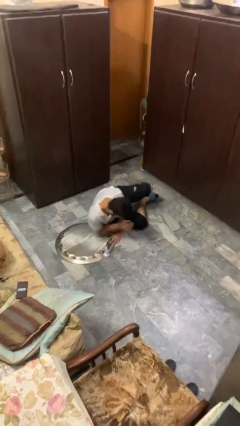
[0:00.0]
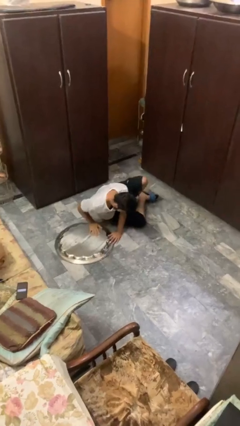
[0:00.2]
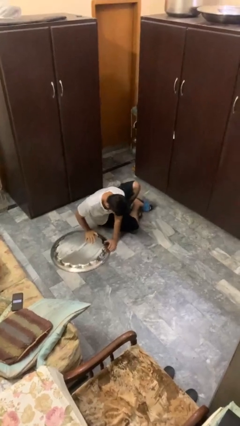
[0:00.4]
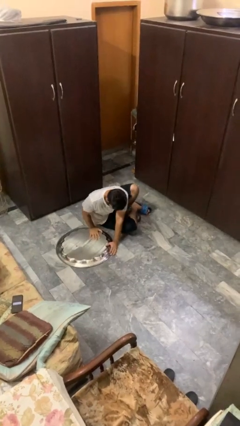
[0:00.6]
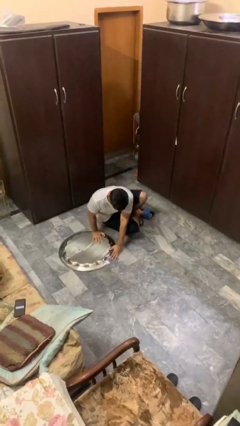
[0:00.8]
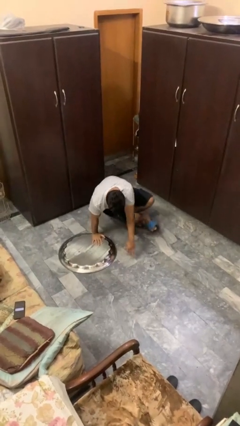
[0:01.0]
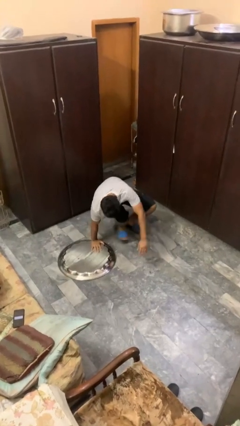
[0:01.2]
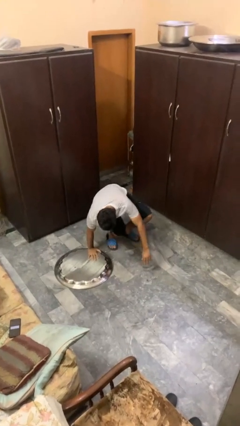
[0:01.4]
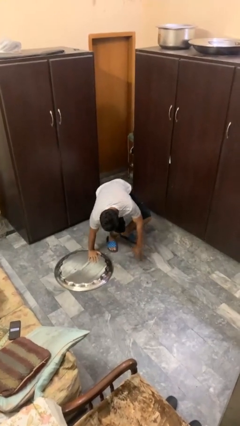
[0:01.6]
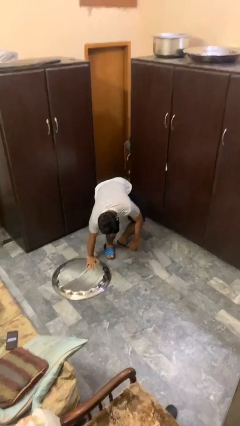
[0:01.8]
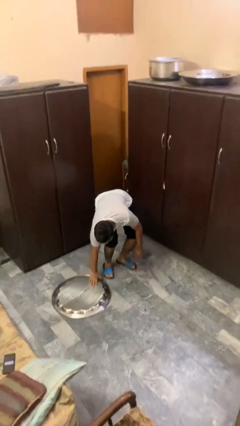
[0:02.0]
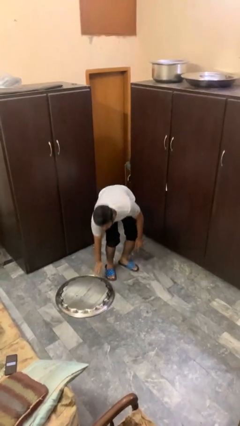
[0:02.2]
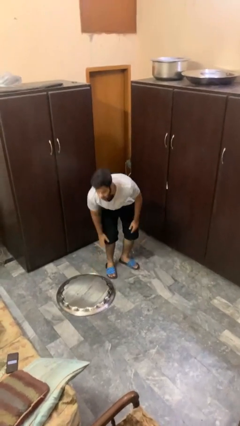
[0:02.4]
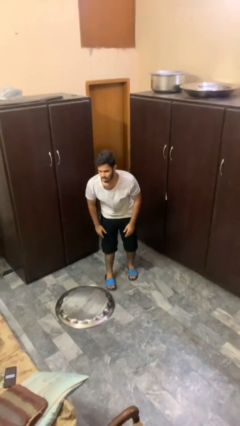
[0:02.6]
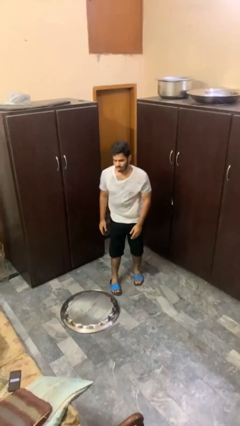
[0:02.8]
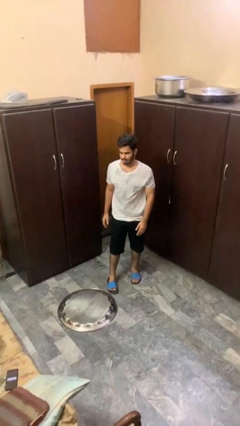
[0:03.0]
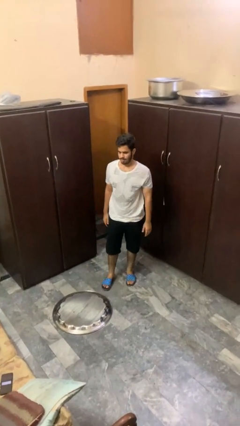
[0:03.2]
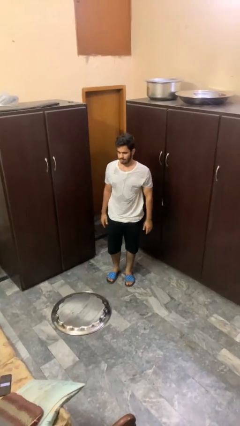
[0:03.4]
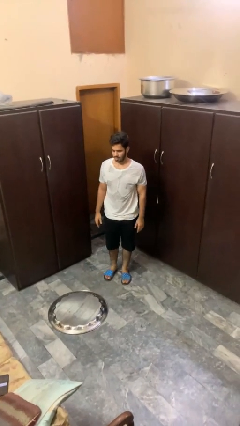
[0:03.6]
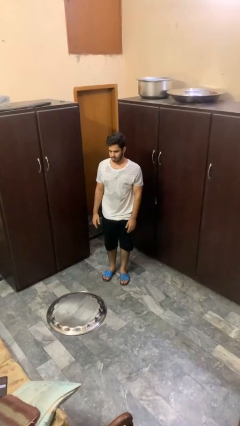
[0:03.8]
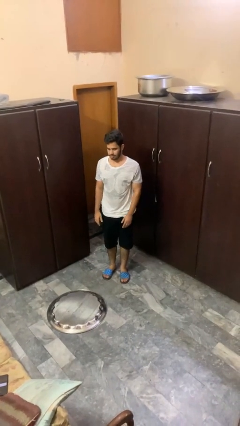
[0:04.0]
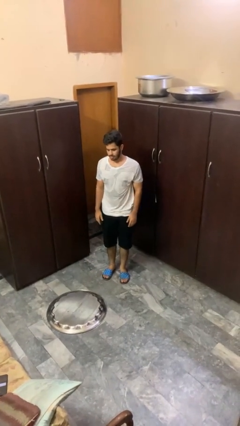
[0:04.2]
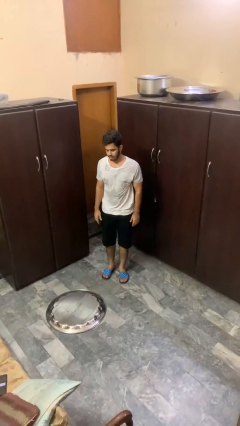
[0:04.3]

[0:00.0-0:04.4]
person stands up from floor

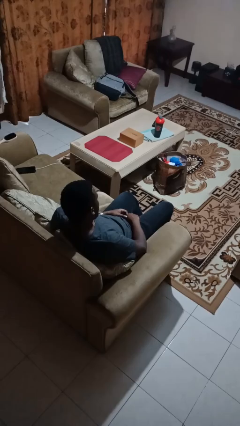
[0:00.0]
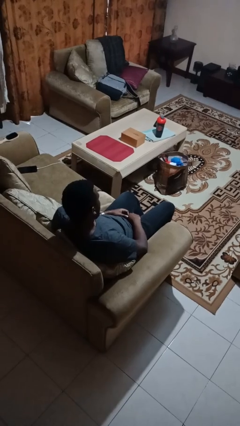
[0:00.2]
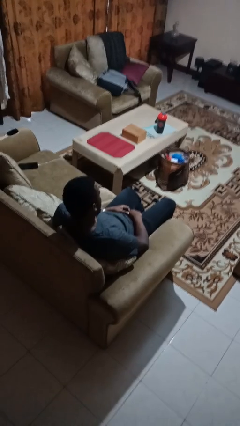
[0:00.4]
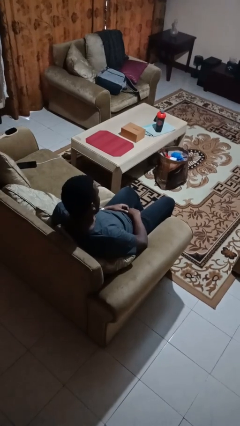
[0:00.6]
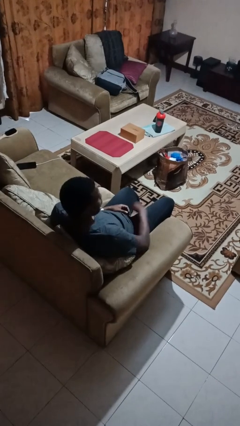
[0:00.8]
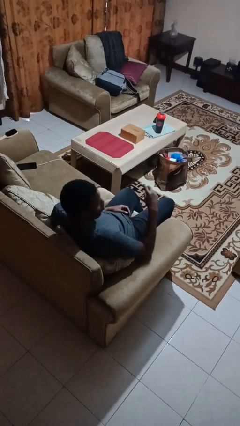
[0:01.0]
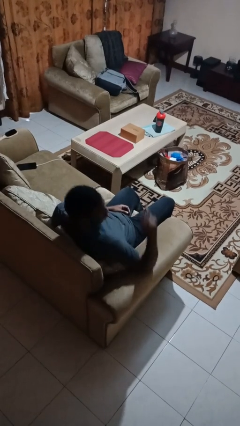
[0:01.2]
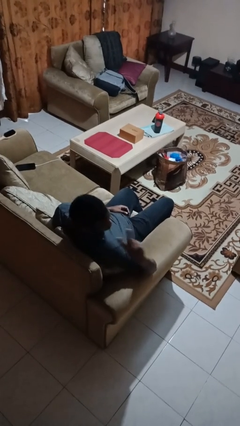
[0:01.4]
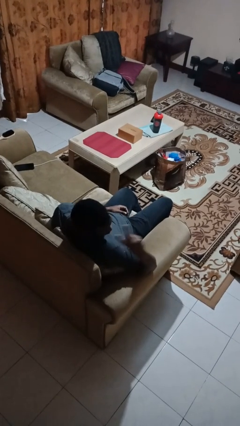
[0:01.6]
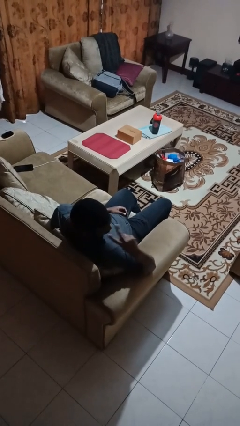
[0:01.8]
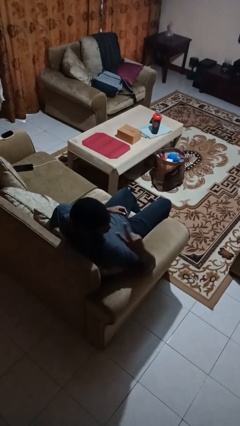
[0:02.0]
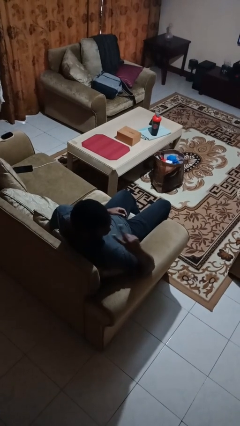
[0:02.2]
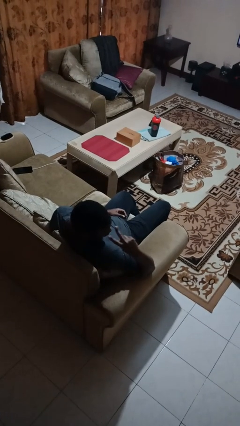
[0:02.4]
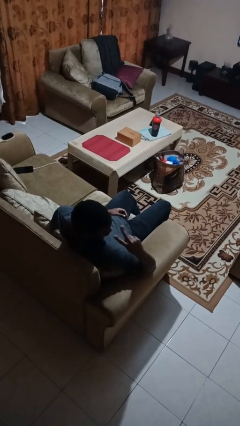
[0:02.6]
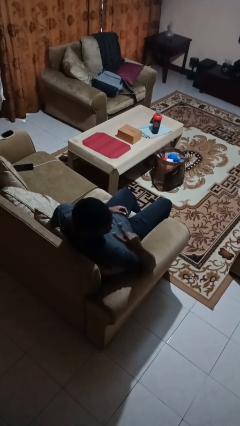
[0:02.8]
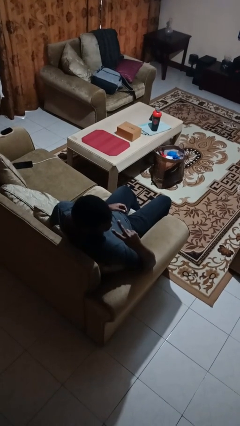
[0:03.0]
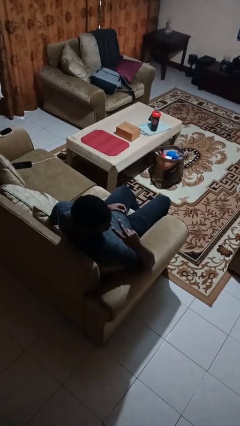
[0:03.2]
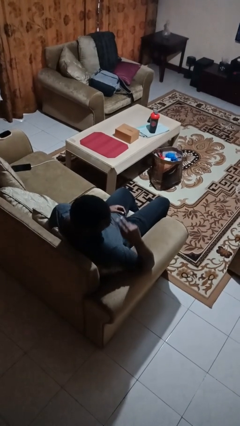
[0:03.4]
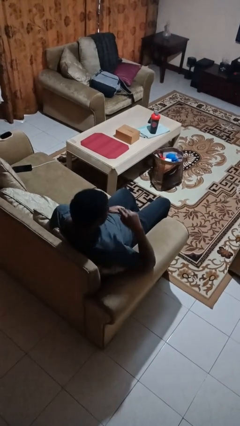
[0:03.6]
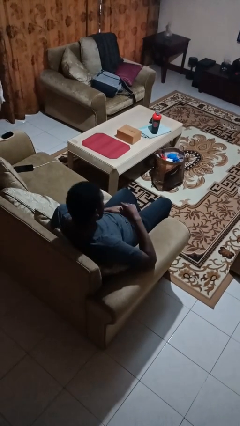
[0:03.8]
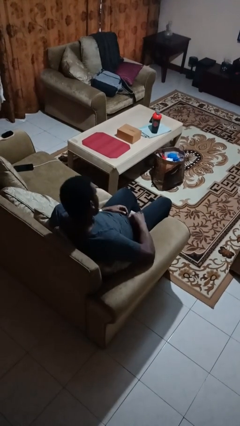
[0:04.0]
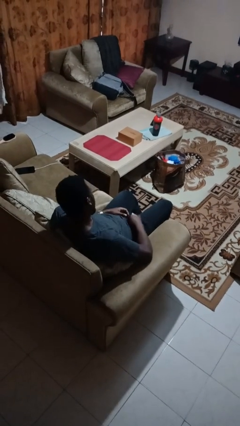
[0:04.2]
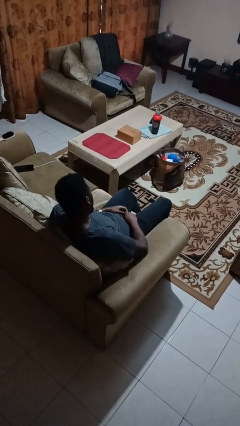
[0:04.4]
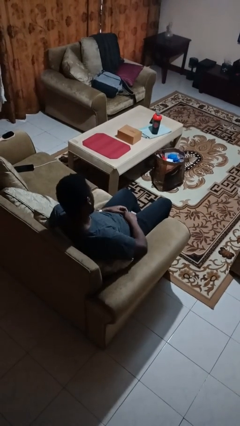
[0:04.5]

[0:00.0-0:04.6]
person gestures watch closely

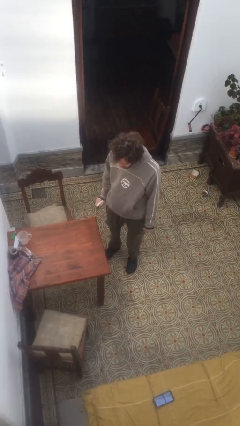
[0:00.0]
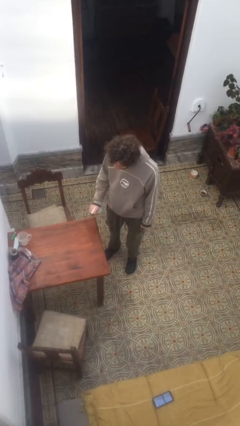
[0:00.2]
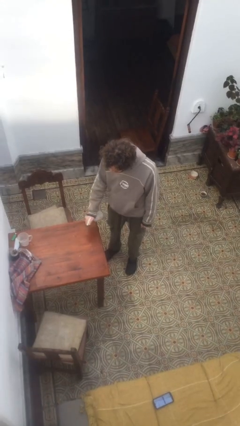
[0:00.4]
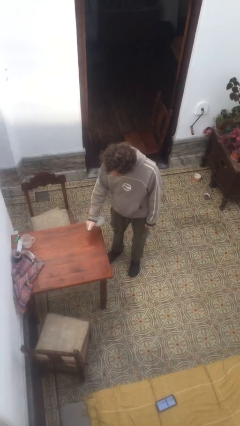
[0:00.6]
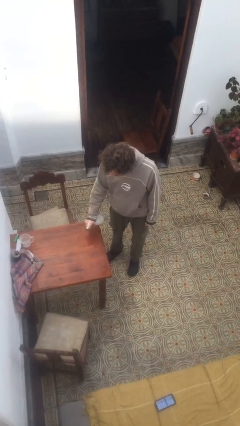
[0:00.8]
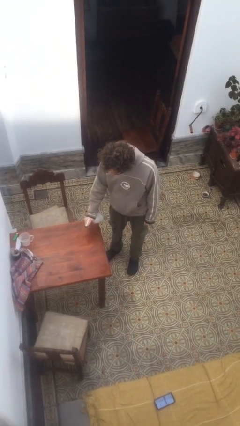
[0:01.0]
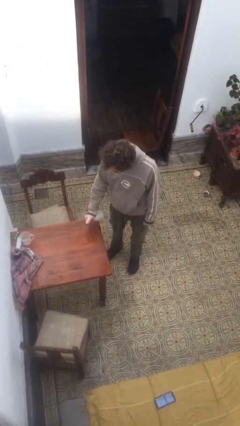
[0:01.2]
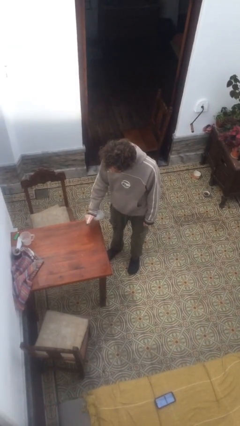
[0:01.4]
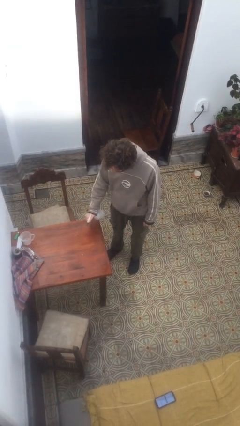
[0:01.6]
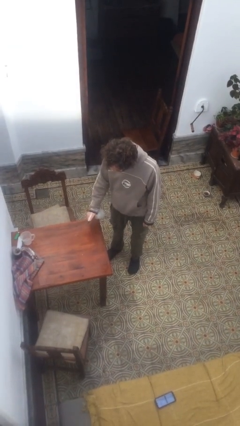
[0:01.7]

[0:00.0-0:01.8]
person sprays from bottle

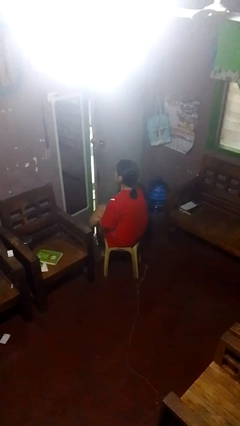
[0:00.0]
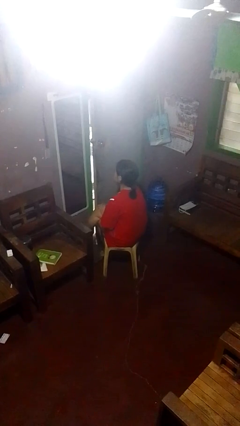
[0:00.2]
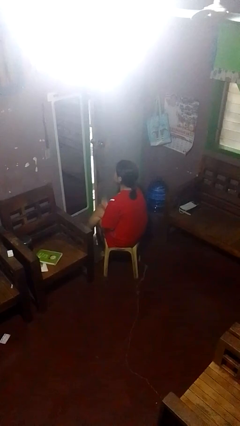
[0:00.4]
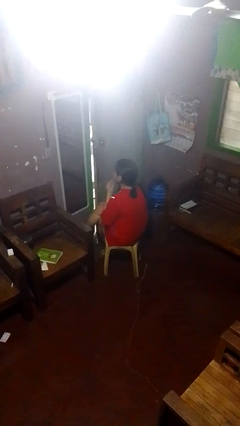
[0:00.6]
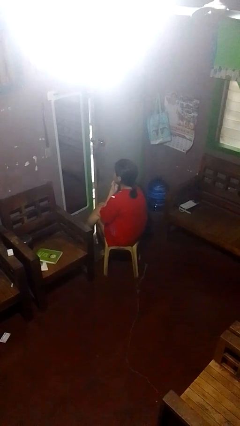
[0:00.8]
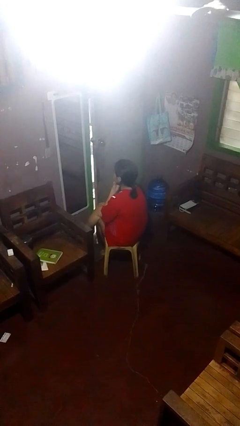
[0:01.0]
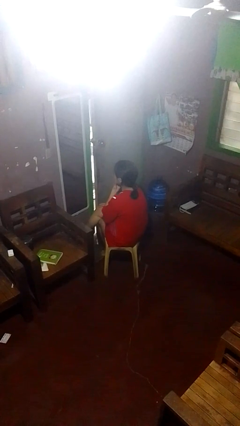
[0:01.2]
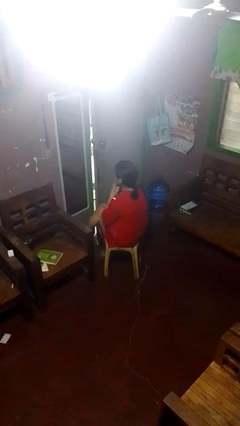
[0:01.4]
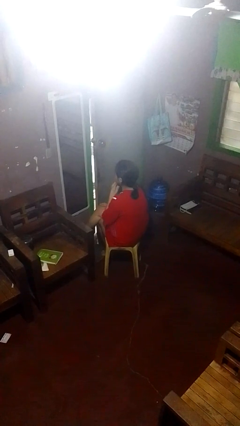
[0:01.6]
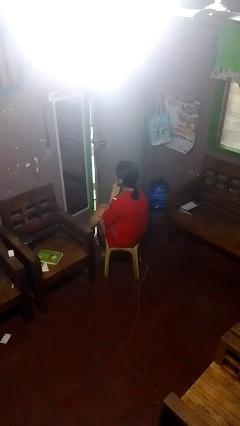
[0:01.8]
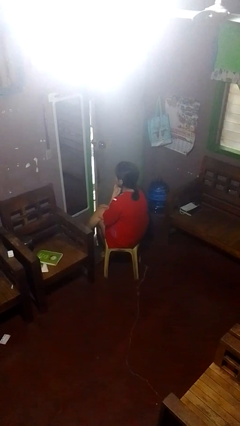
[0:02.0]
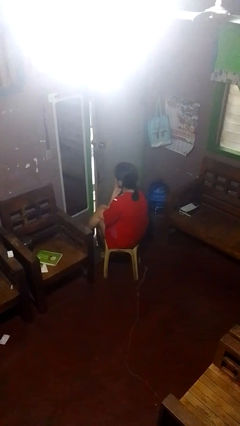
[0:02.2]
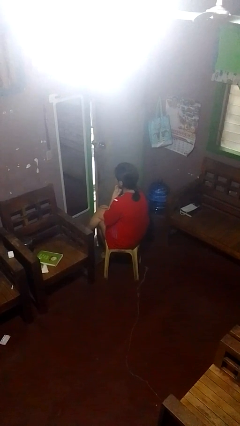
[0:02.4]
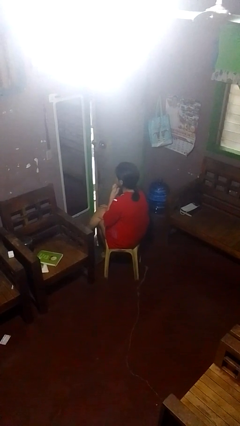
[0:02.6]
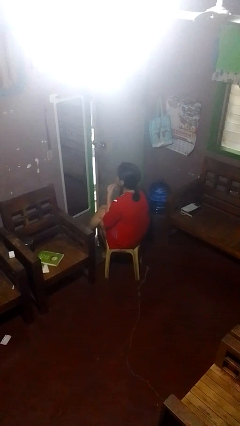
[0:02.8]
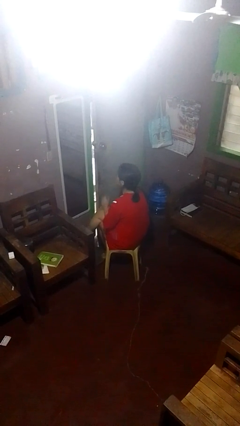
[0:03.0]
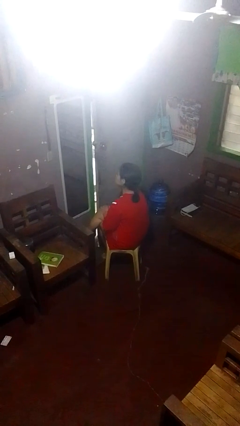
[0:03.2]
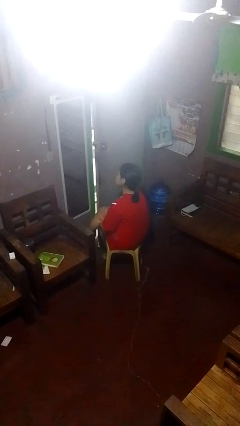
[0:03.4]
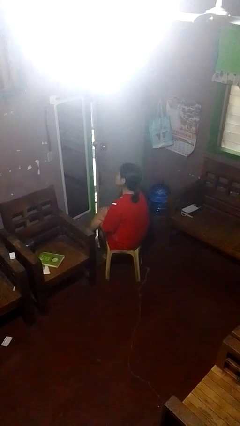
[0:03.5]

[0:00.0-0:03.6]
person strokes chin

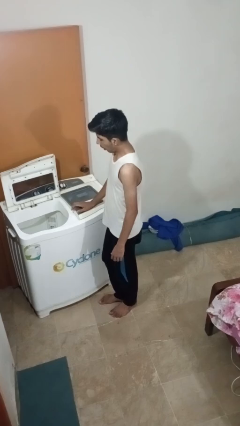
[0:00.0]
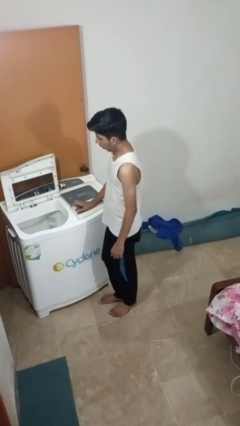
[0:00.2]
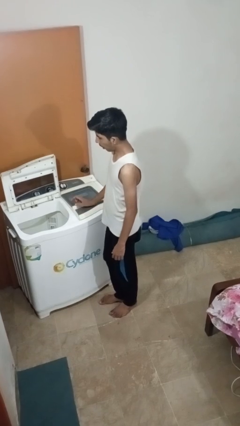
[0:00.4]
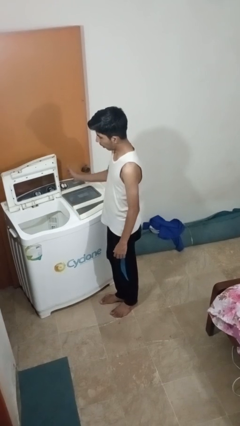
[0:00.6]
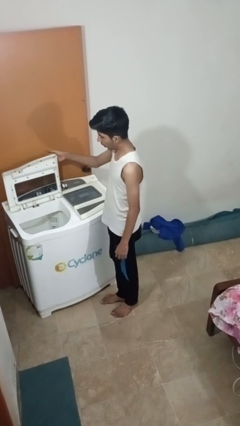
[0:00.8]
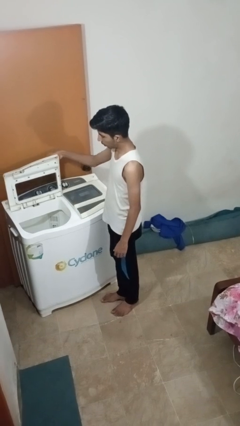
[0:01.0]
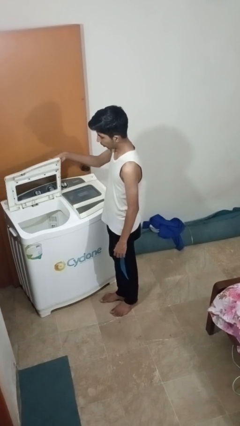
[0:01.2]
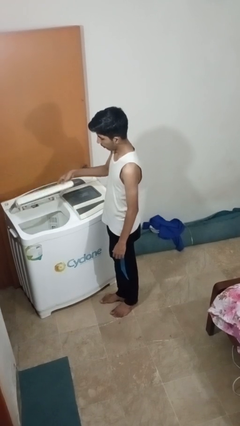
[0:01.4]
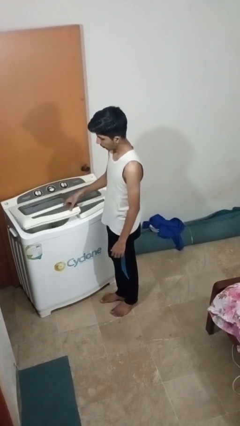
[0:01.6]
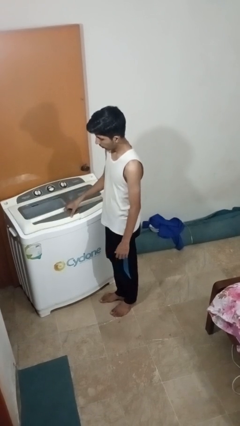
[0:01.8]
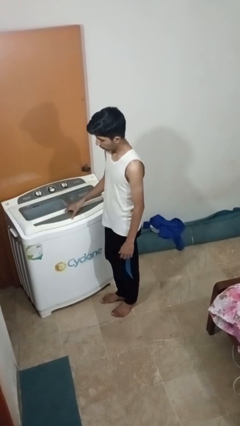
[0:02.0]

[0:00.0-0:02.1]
person closes clothes washer

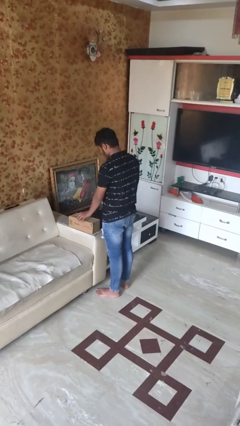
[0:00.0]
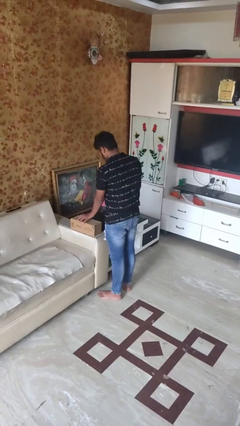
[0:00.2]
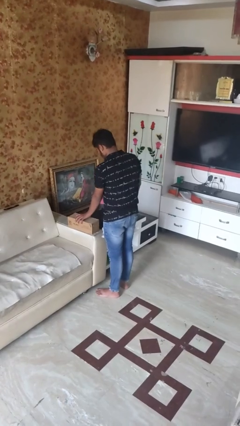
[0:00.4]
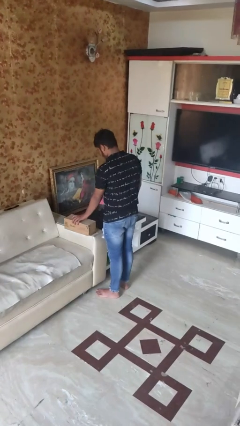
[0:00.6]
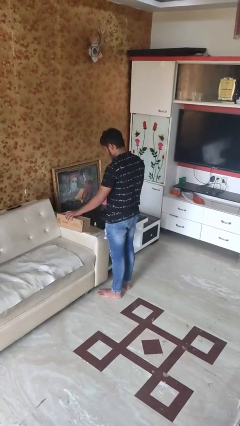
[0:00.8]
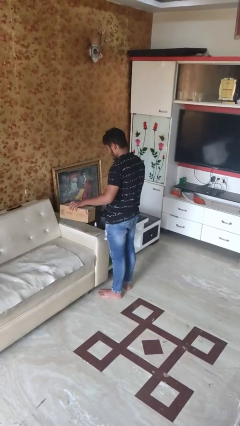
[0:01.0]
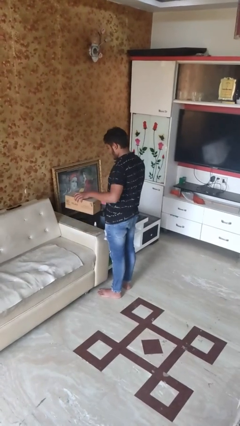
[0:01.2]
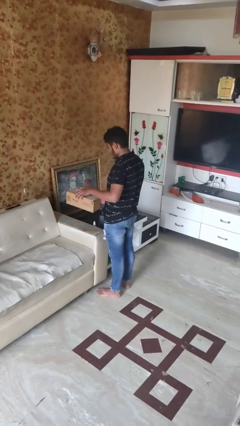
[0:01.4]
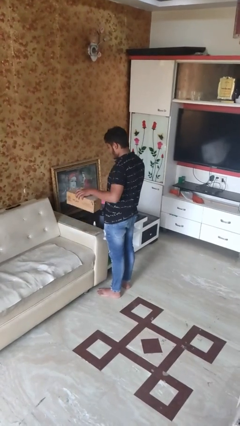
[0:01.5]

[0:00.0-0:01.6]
person picks up object from couch
